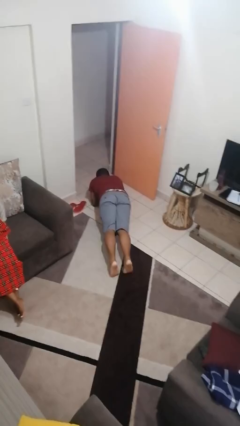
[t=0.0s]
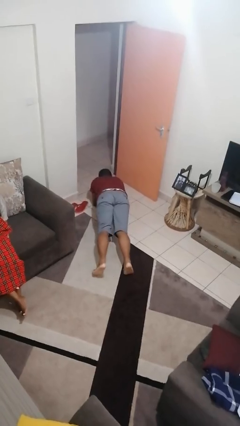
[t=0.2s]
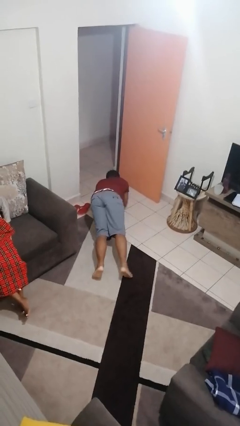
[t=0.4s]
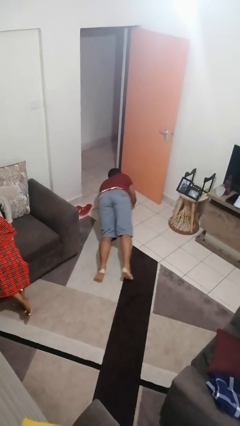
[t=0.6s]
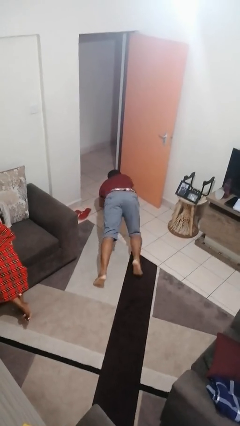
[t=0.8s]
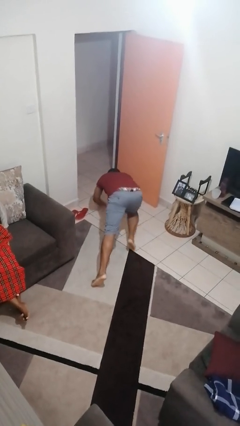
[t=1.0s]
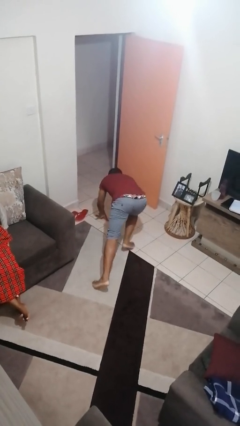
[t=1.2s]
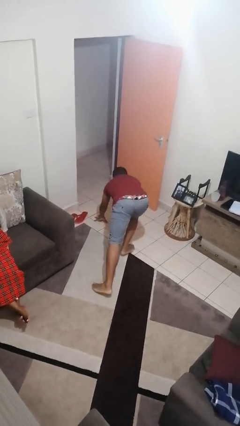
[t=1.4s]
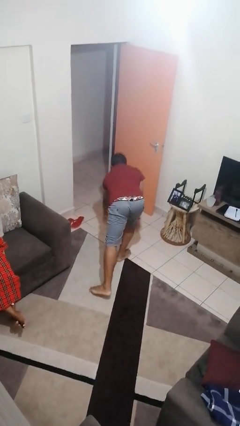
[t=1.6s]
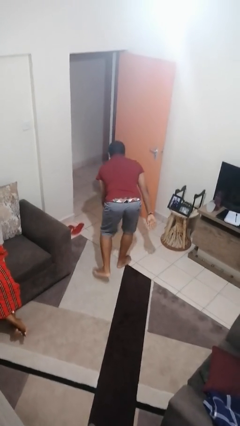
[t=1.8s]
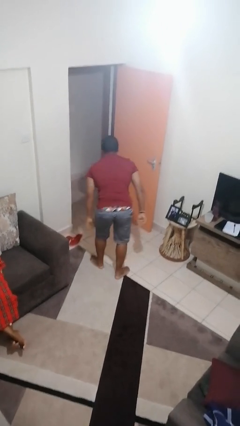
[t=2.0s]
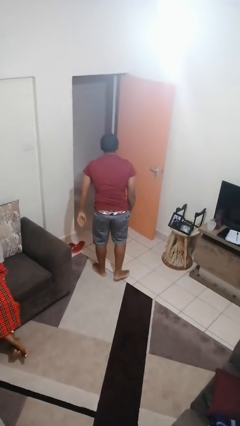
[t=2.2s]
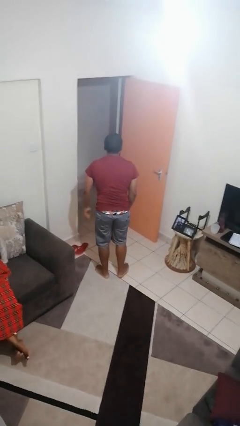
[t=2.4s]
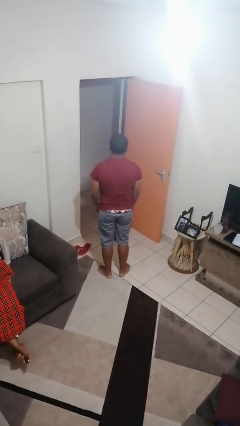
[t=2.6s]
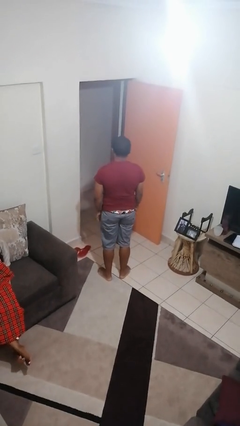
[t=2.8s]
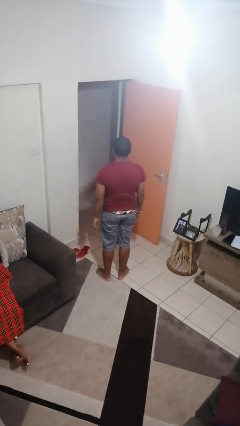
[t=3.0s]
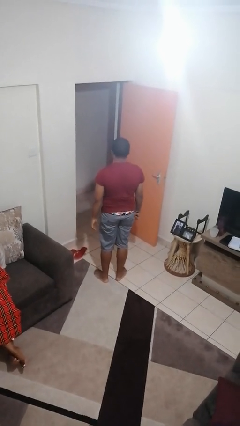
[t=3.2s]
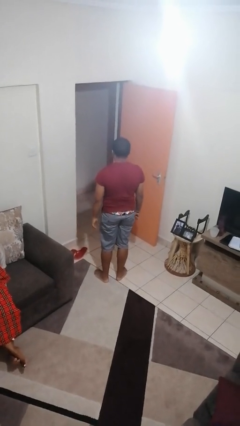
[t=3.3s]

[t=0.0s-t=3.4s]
person stands up from floor

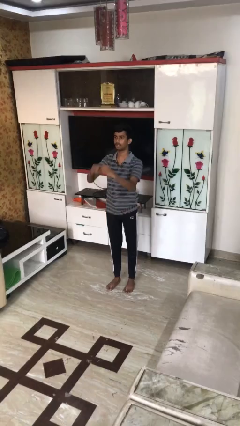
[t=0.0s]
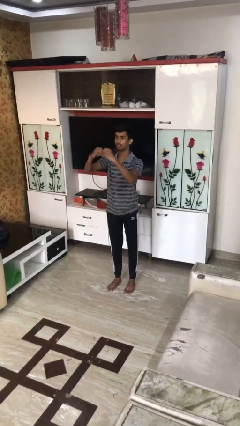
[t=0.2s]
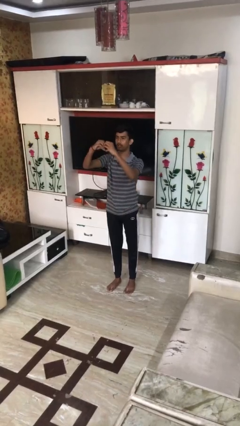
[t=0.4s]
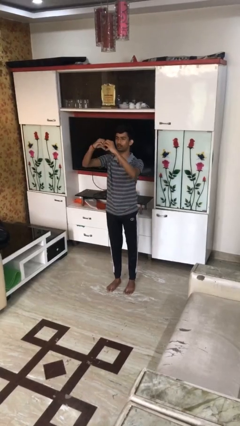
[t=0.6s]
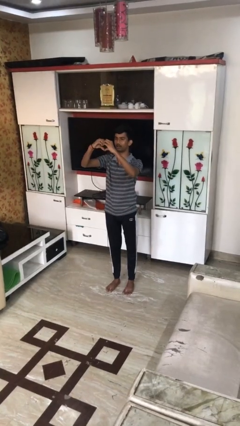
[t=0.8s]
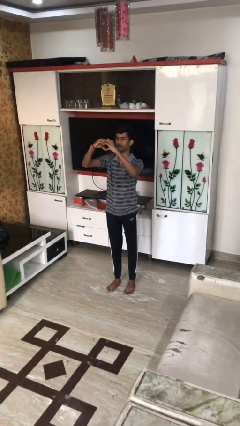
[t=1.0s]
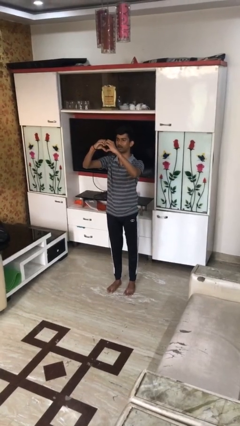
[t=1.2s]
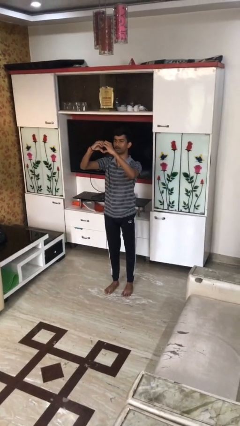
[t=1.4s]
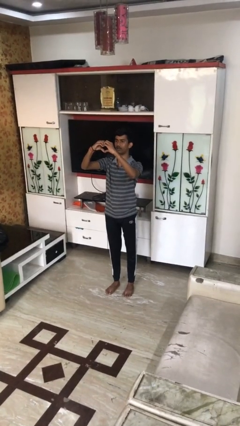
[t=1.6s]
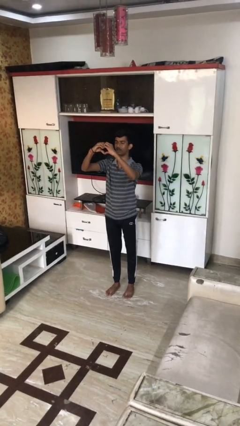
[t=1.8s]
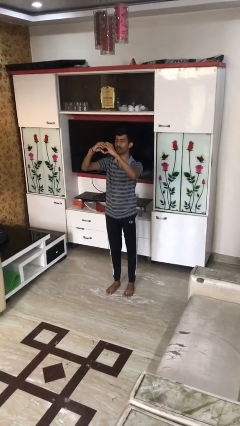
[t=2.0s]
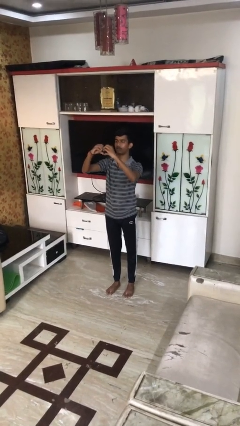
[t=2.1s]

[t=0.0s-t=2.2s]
person gestures heart

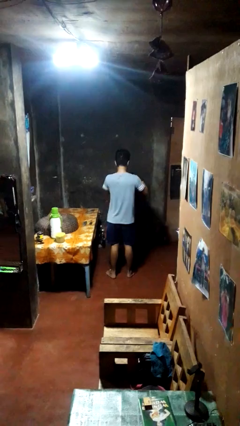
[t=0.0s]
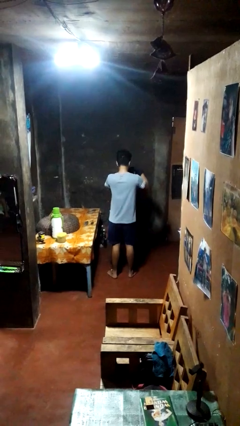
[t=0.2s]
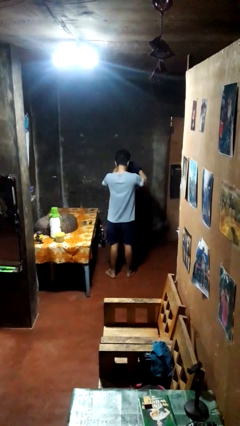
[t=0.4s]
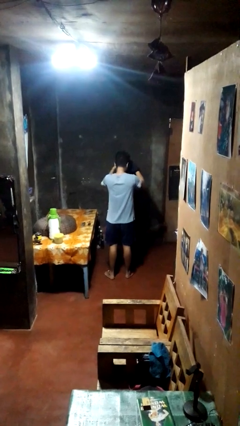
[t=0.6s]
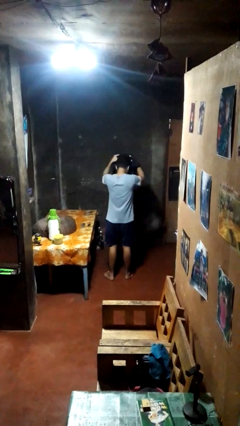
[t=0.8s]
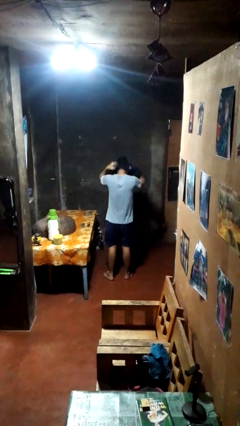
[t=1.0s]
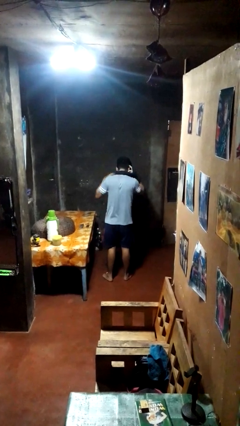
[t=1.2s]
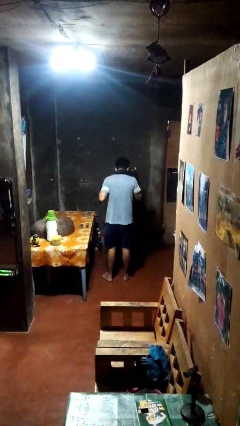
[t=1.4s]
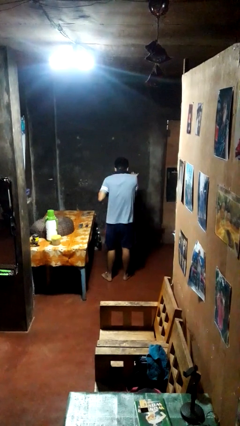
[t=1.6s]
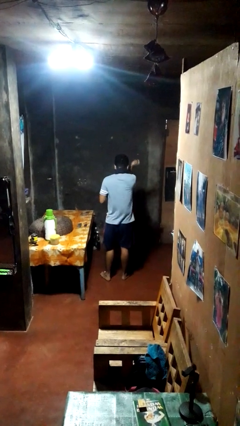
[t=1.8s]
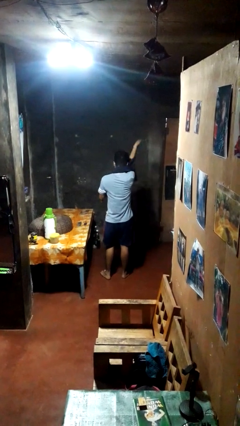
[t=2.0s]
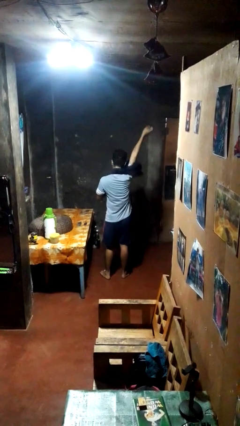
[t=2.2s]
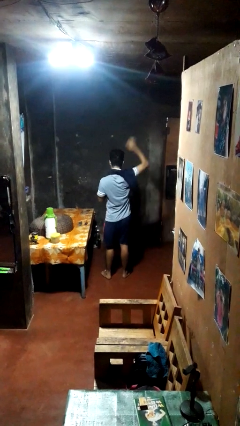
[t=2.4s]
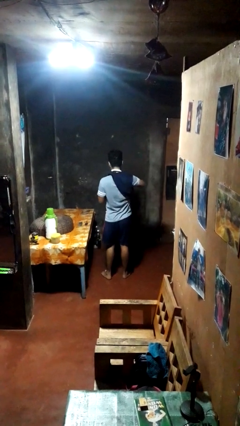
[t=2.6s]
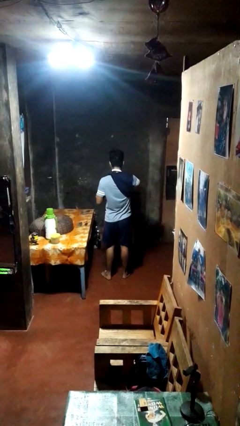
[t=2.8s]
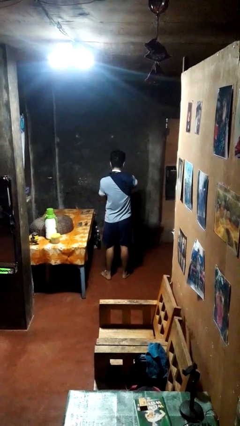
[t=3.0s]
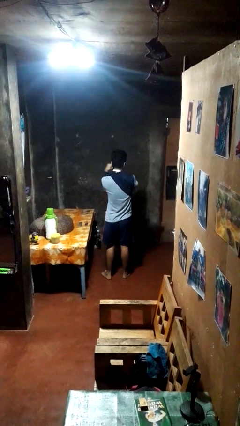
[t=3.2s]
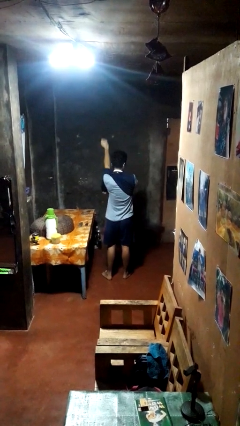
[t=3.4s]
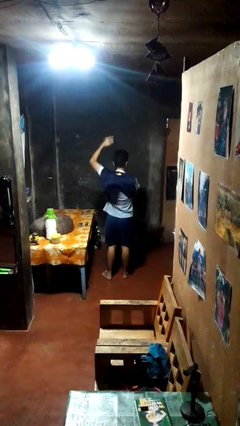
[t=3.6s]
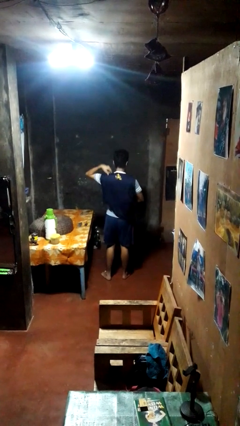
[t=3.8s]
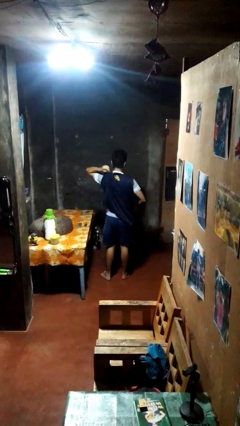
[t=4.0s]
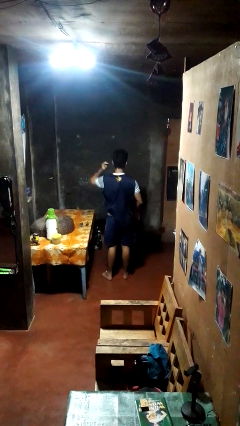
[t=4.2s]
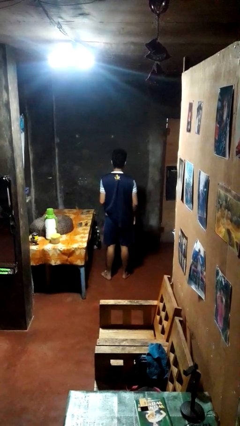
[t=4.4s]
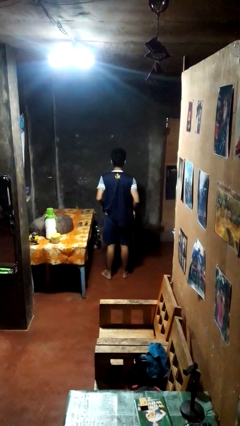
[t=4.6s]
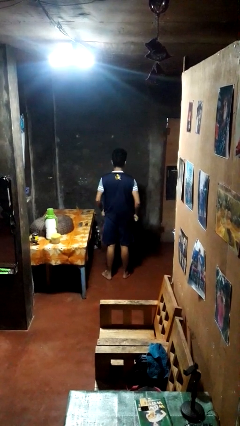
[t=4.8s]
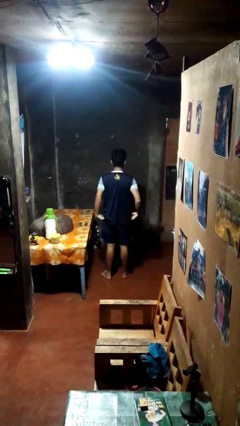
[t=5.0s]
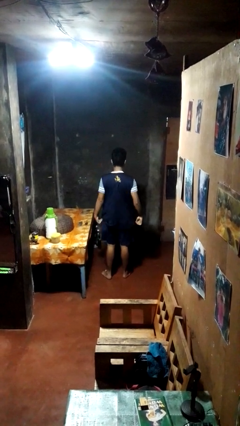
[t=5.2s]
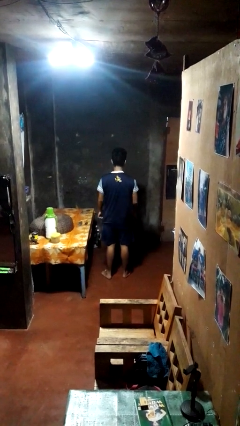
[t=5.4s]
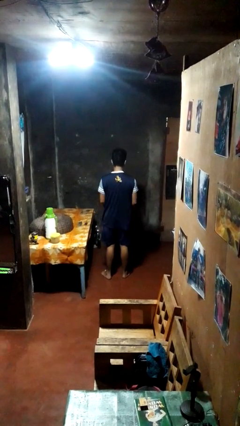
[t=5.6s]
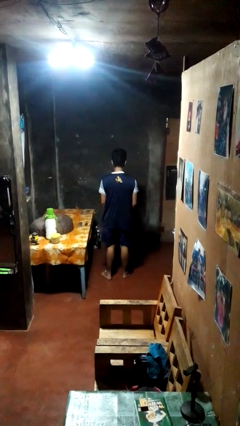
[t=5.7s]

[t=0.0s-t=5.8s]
person puts on shirt

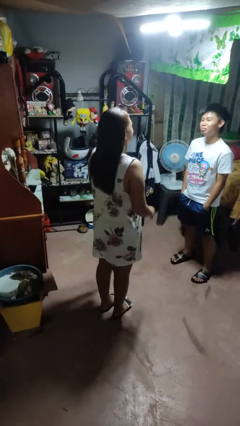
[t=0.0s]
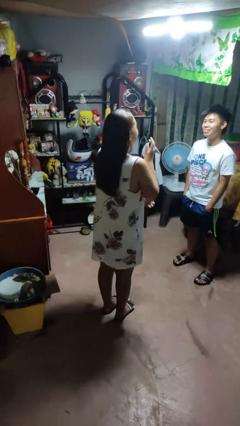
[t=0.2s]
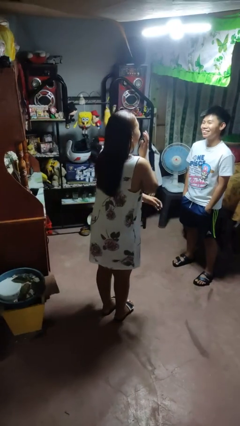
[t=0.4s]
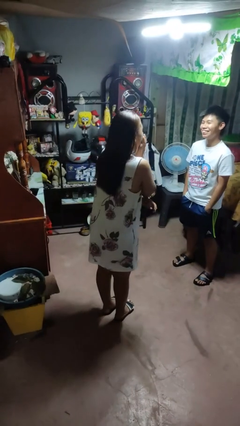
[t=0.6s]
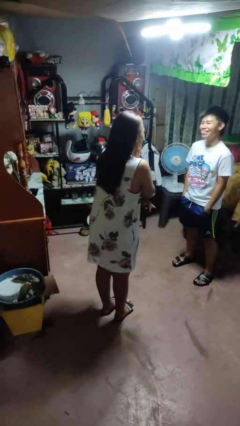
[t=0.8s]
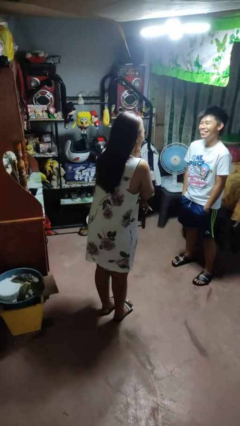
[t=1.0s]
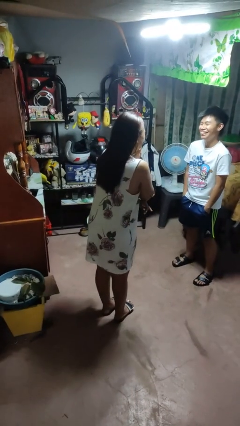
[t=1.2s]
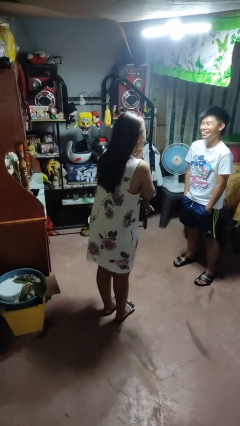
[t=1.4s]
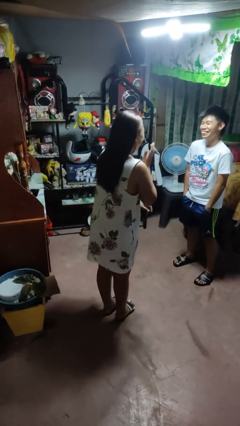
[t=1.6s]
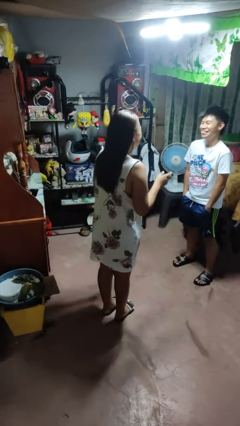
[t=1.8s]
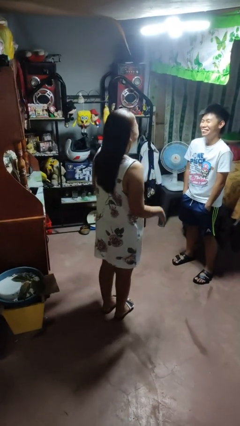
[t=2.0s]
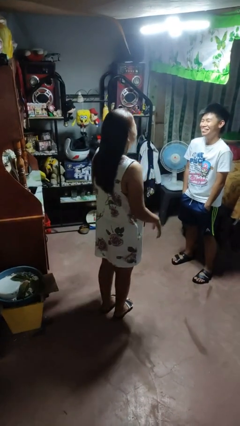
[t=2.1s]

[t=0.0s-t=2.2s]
person laughs with person

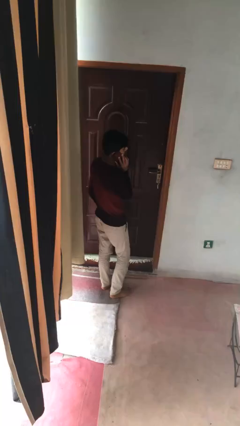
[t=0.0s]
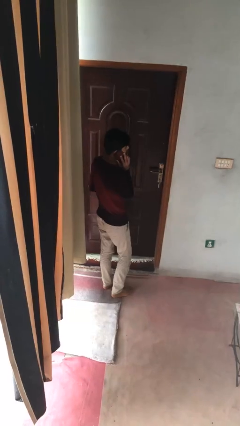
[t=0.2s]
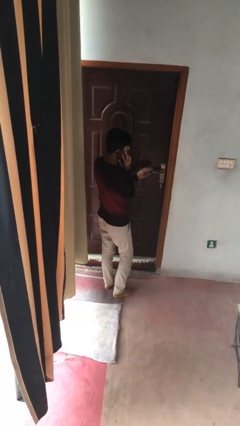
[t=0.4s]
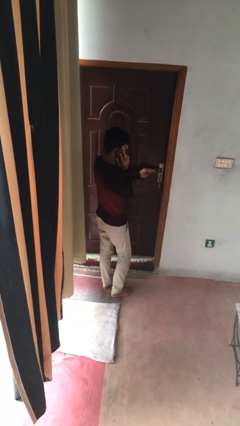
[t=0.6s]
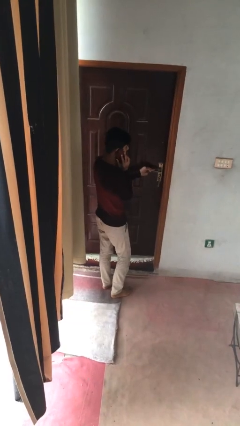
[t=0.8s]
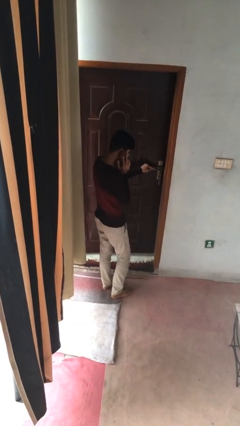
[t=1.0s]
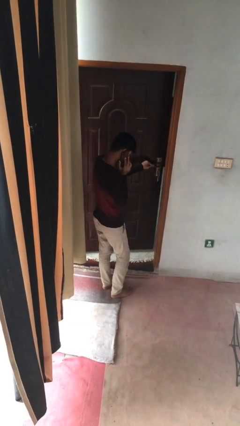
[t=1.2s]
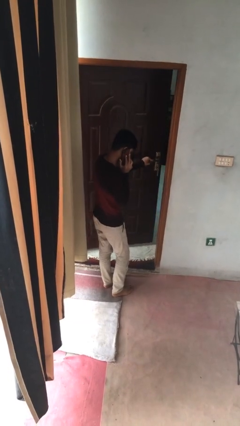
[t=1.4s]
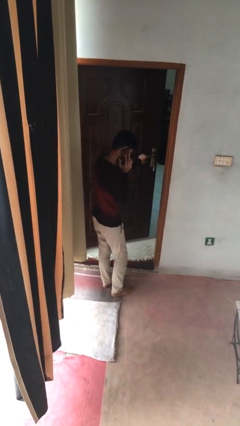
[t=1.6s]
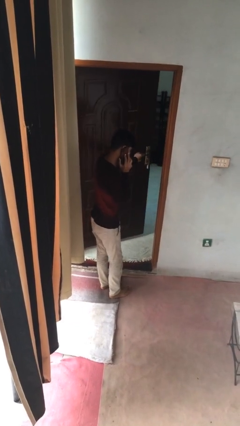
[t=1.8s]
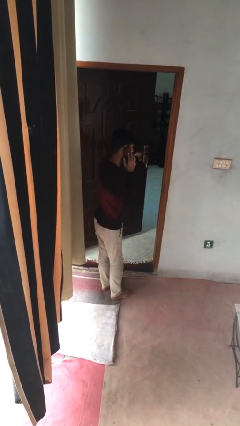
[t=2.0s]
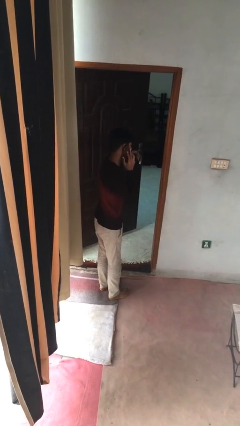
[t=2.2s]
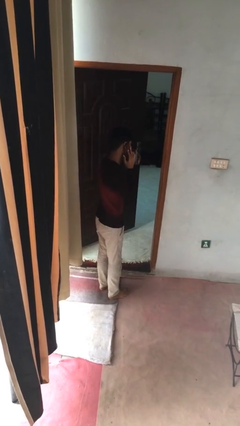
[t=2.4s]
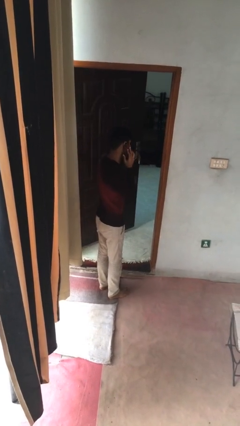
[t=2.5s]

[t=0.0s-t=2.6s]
person opens facility door

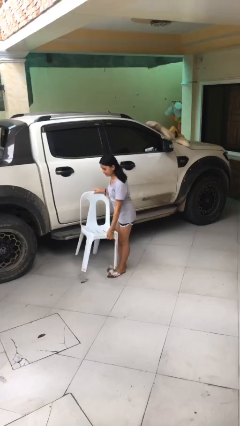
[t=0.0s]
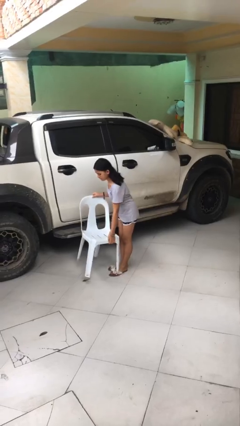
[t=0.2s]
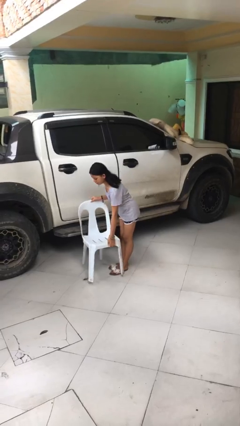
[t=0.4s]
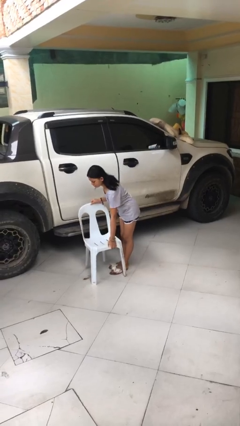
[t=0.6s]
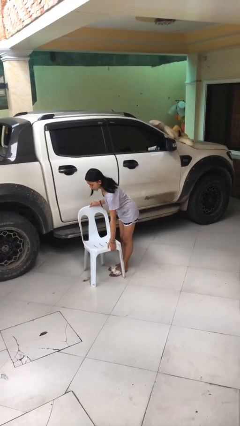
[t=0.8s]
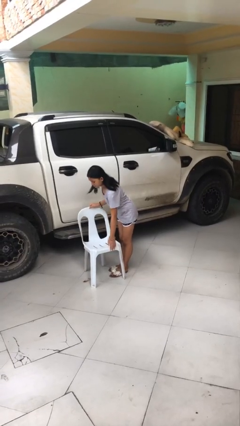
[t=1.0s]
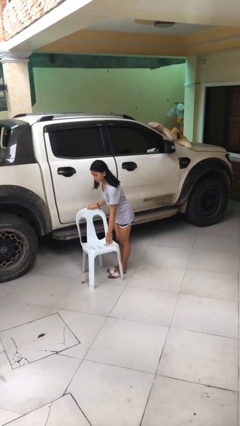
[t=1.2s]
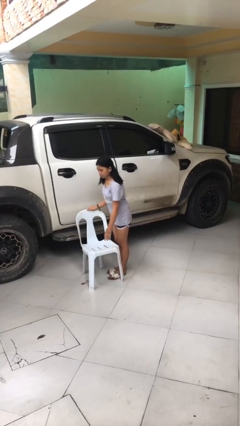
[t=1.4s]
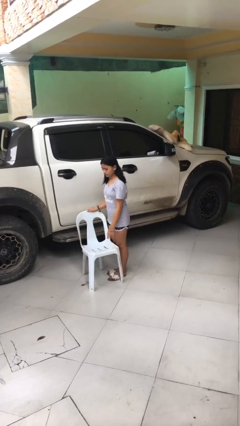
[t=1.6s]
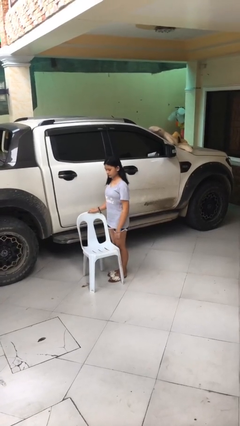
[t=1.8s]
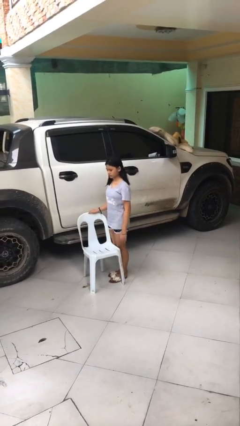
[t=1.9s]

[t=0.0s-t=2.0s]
person puts down object on floor
